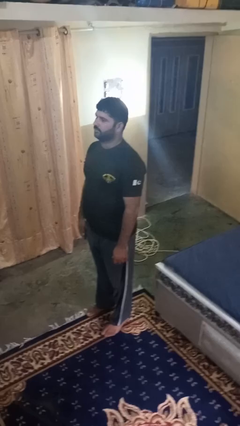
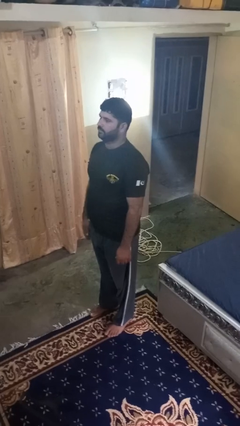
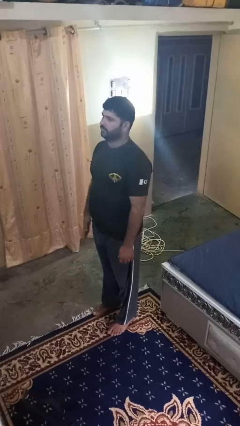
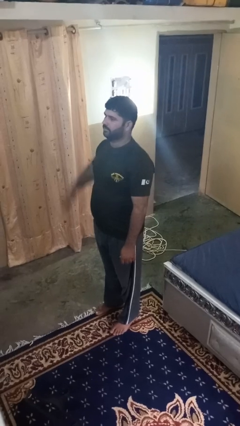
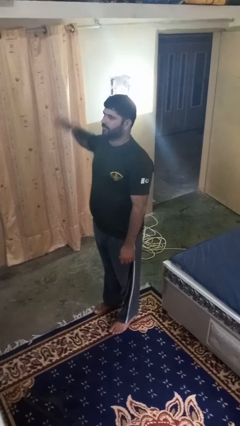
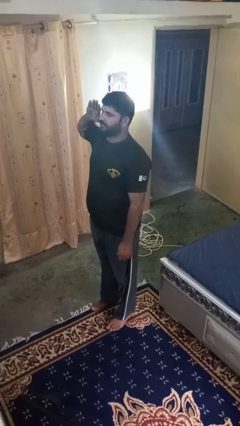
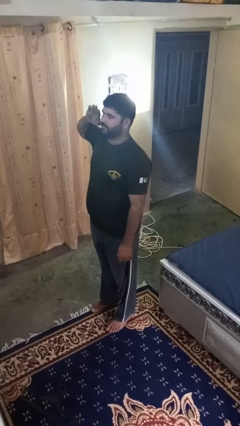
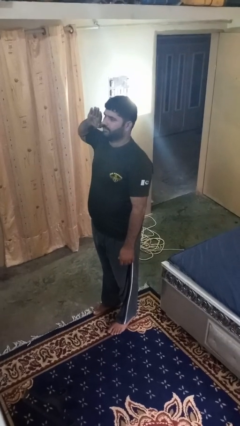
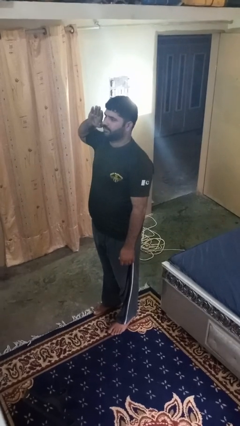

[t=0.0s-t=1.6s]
person salutes

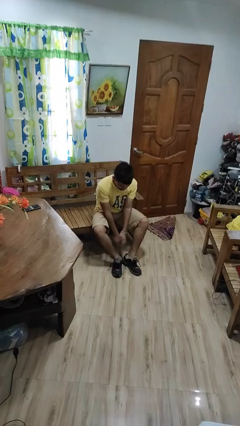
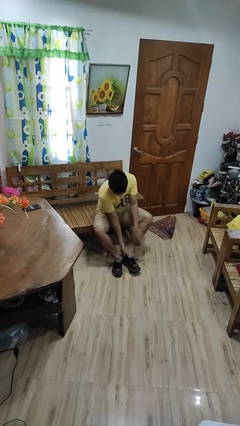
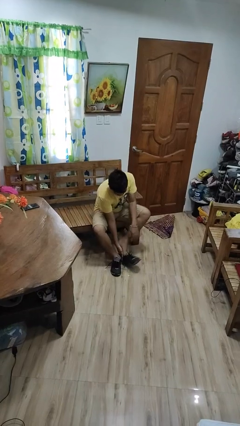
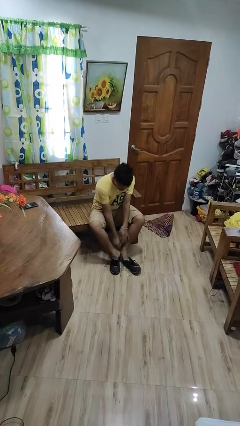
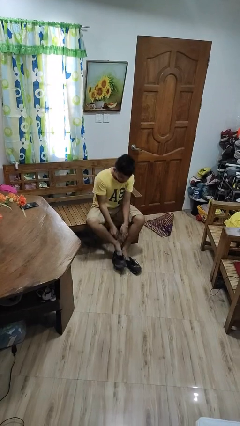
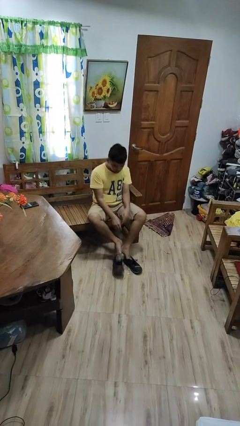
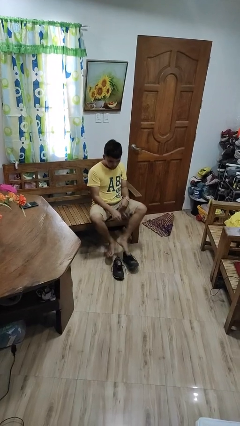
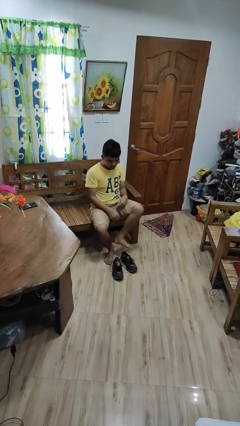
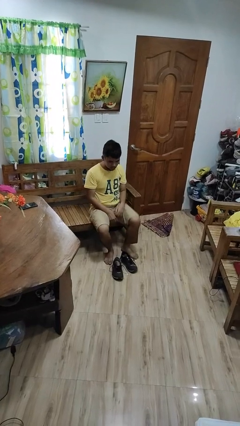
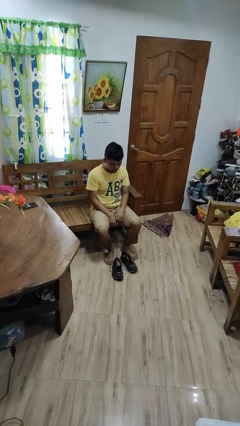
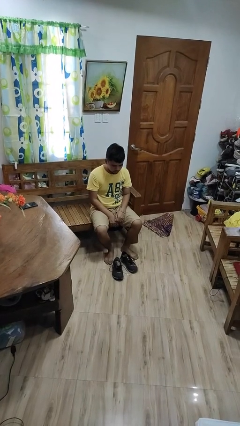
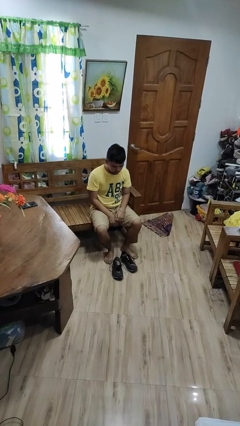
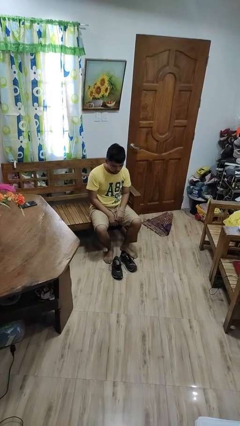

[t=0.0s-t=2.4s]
person takes off shoes

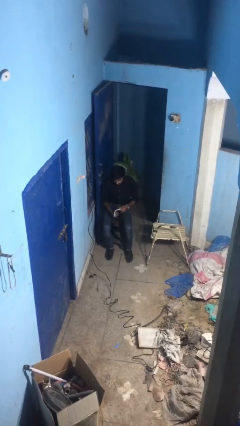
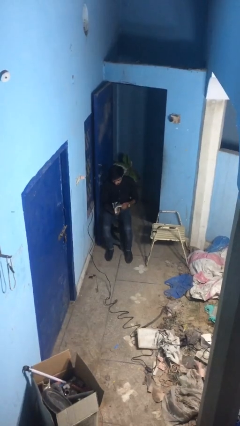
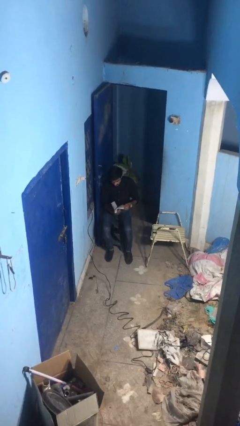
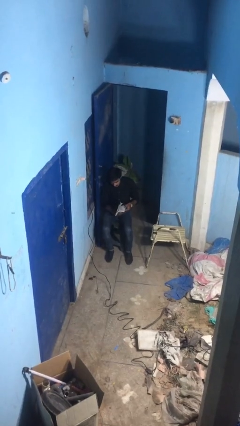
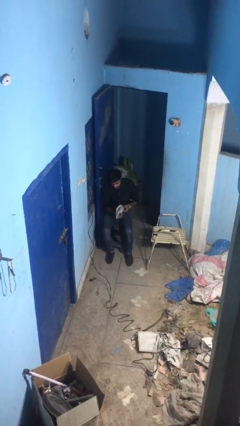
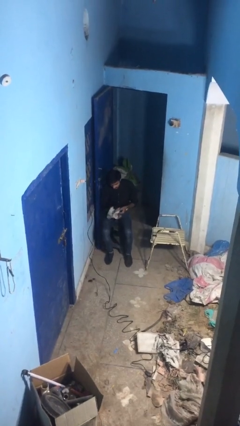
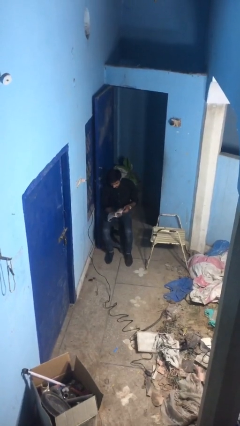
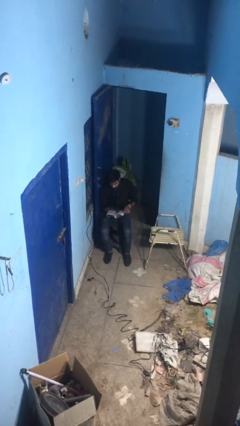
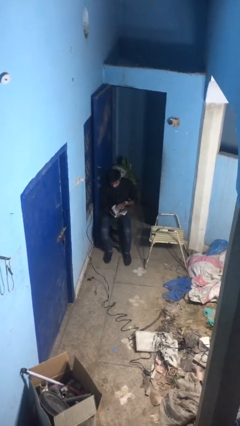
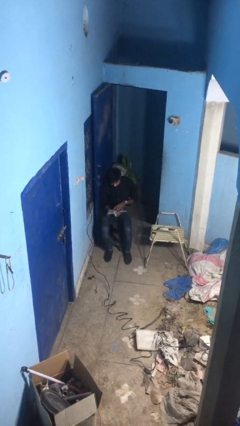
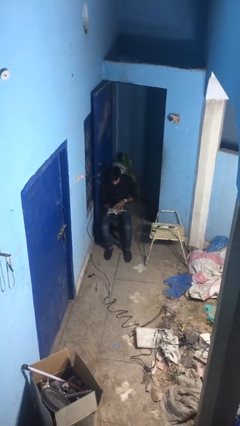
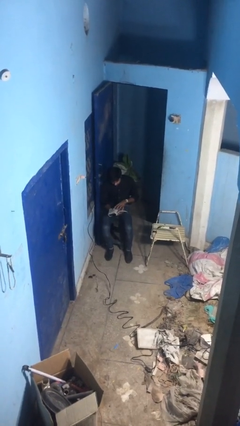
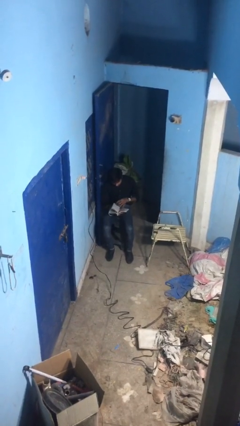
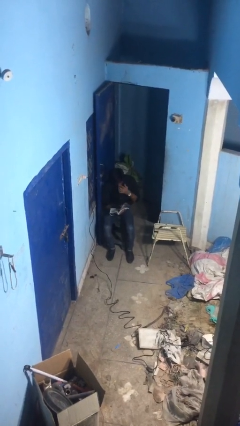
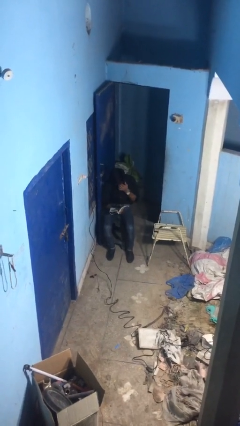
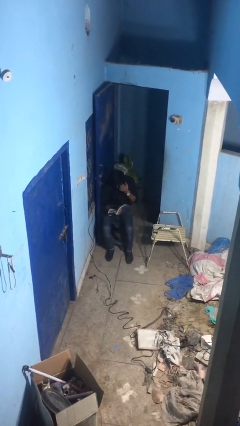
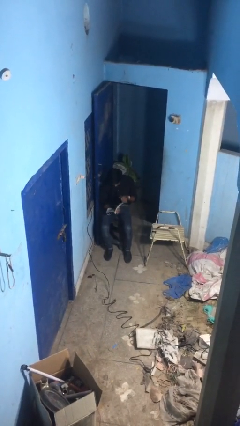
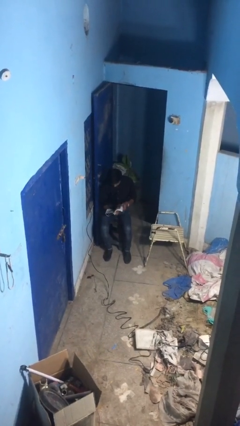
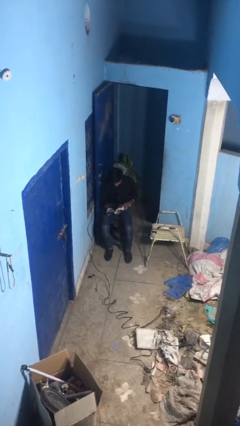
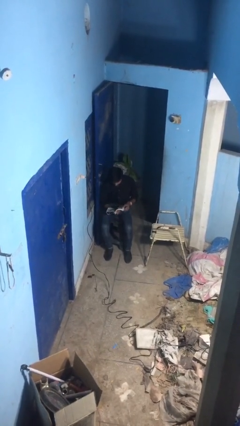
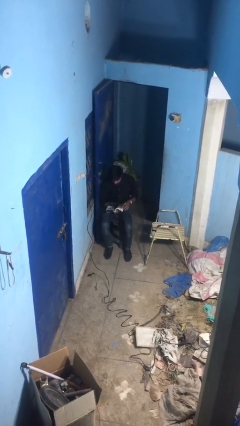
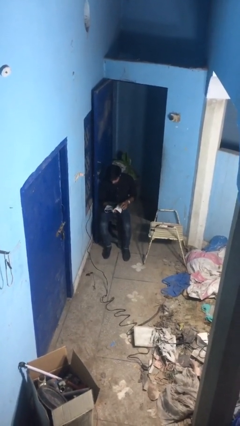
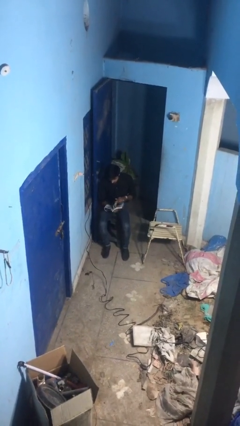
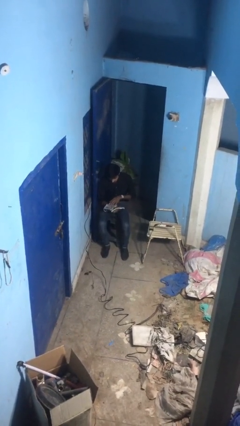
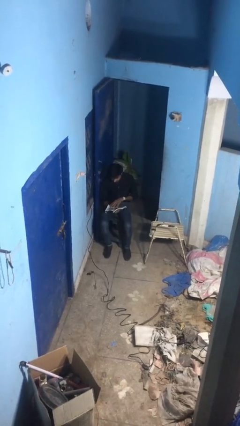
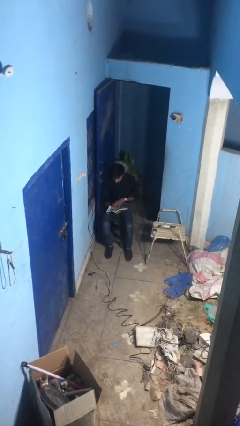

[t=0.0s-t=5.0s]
person reads document

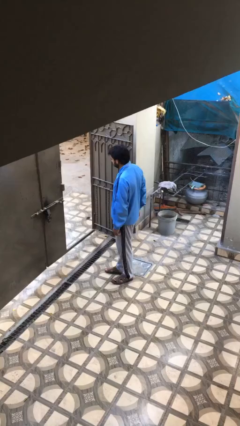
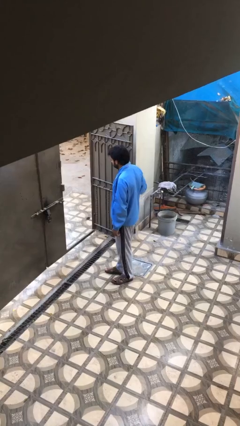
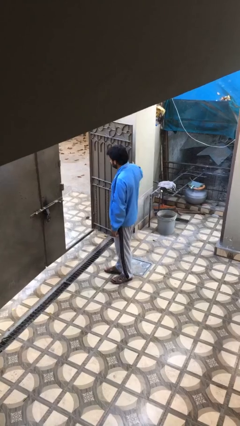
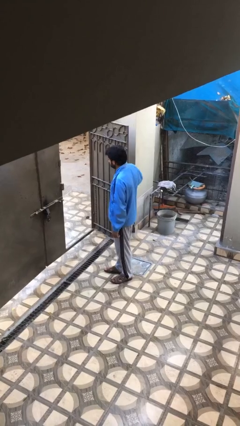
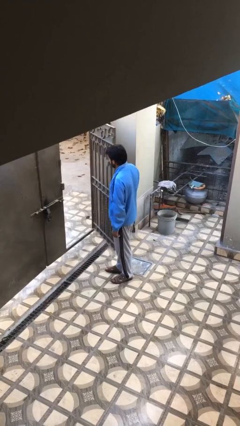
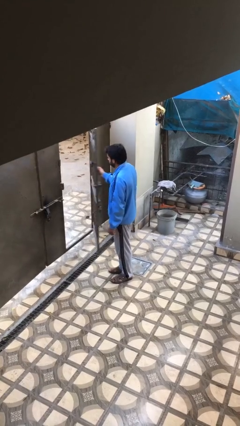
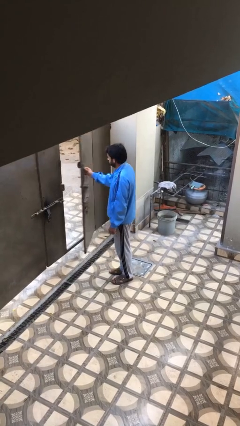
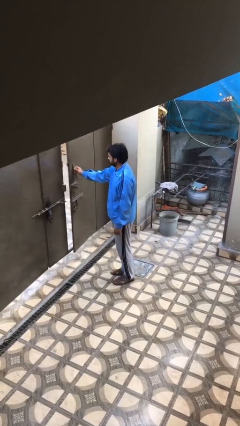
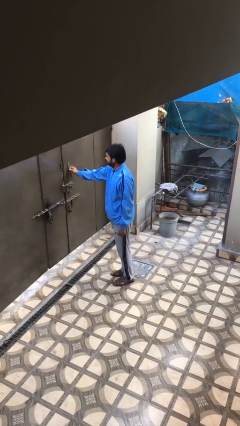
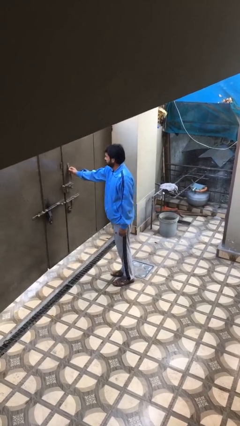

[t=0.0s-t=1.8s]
person closes facility door

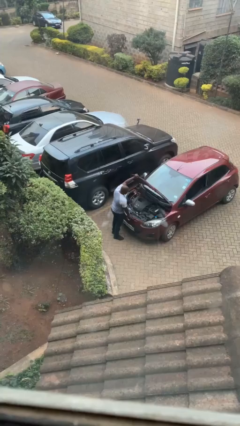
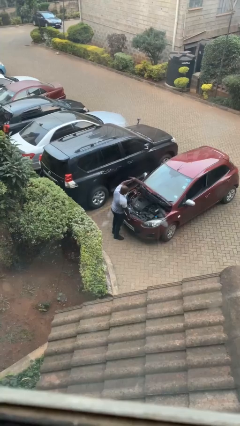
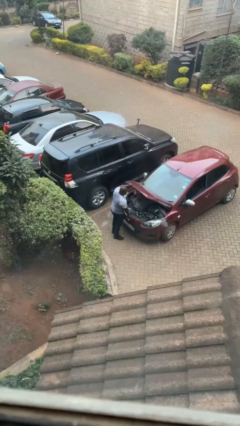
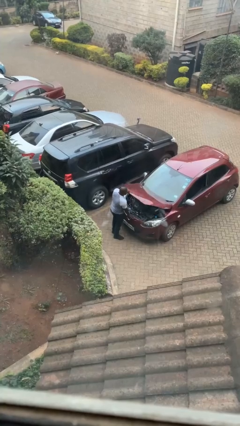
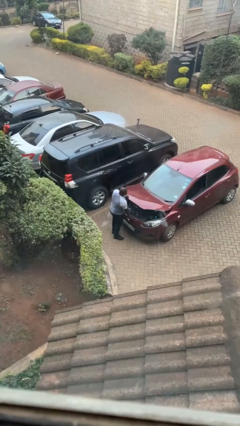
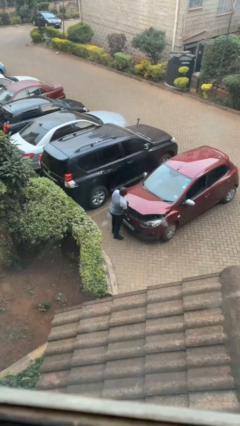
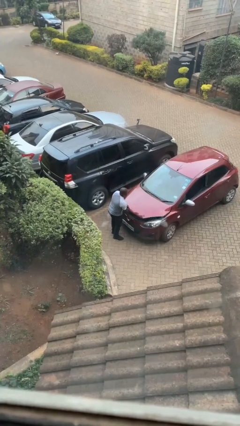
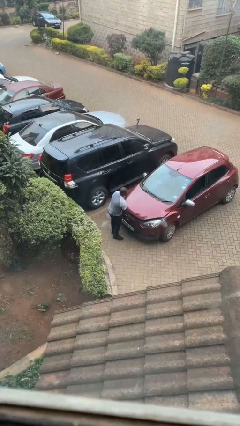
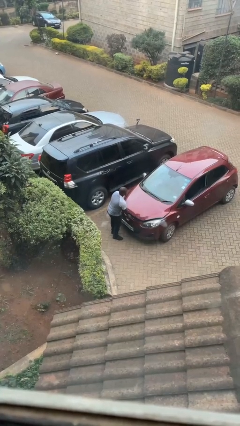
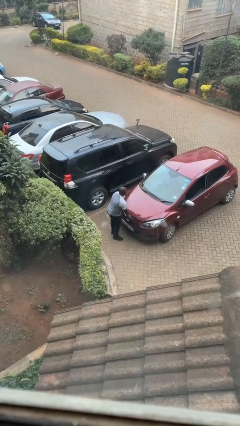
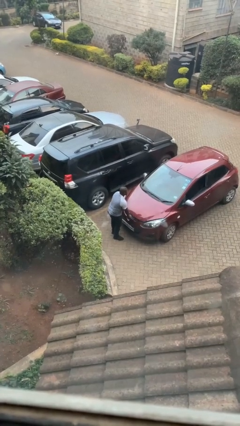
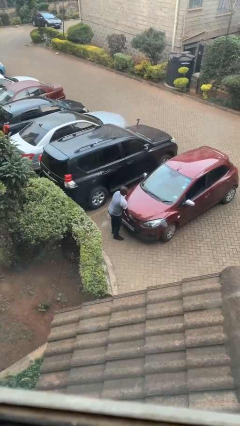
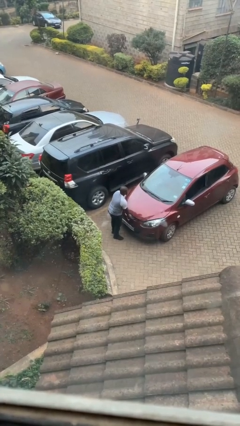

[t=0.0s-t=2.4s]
person closes car hood

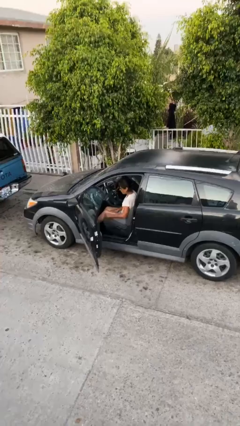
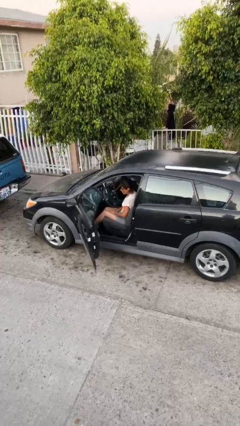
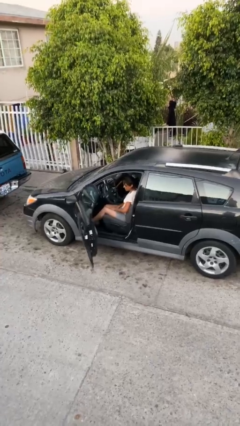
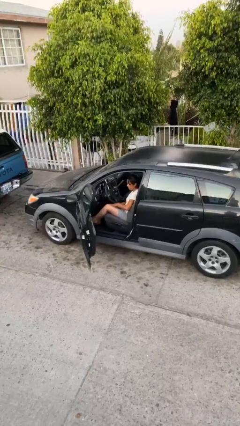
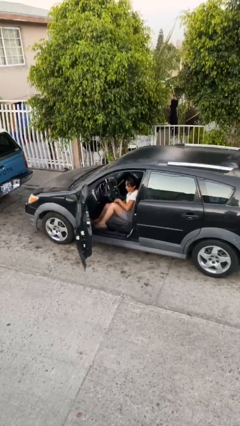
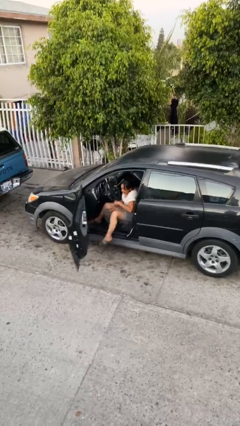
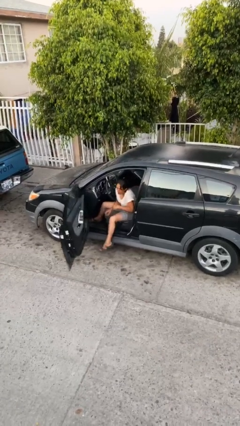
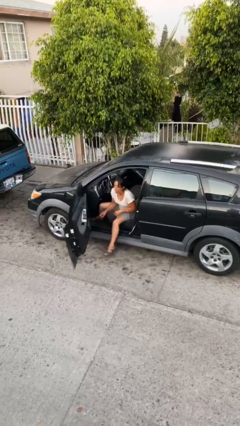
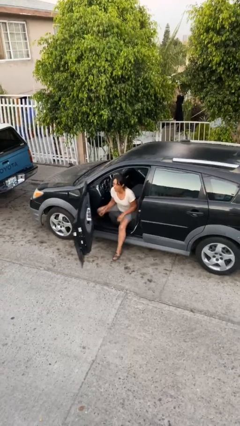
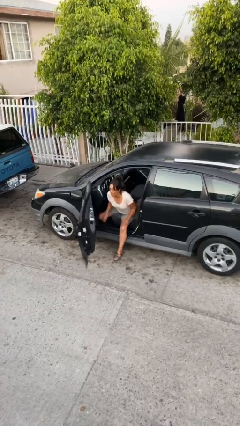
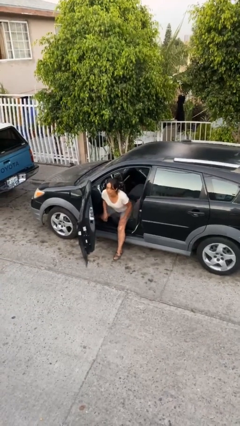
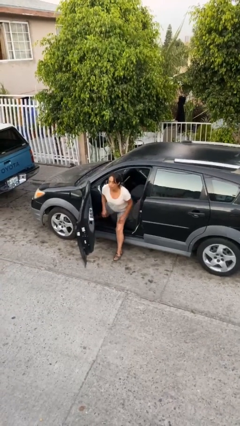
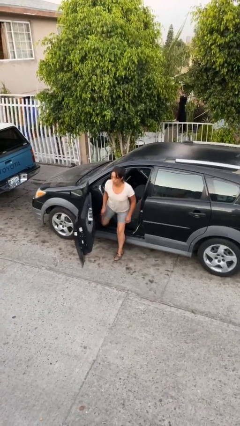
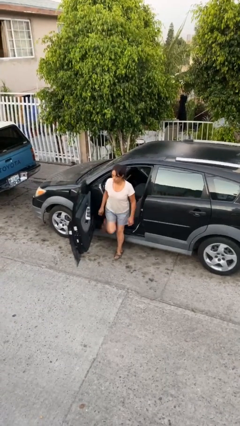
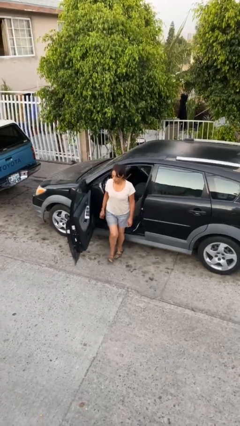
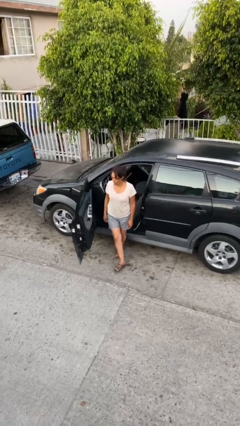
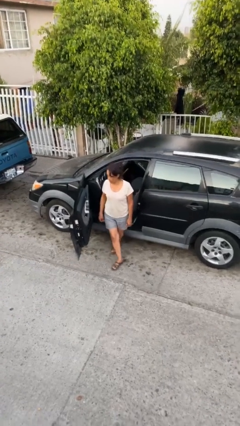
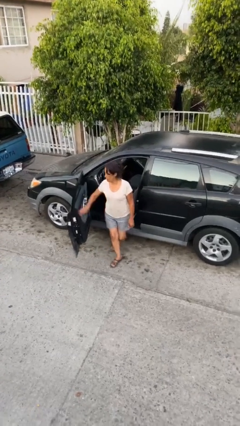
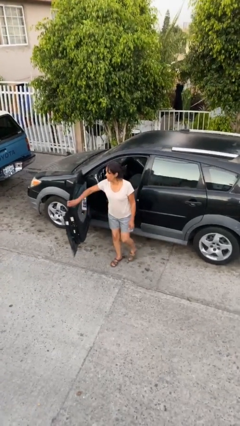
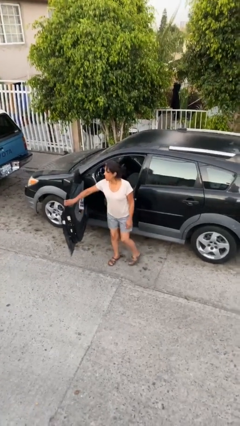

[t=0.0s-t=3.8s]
person exits car

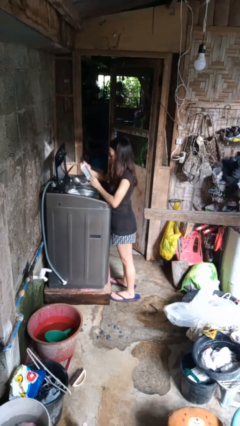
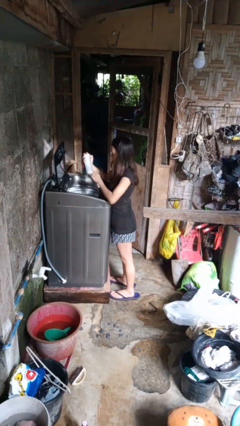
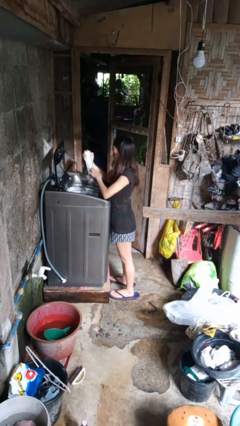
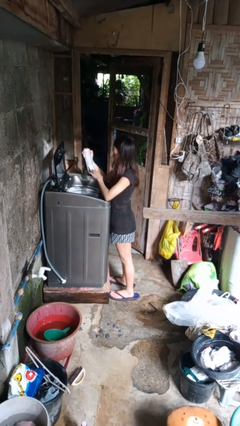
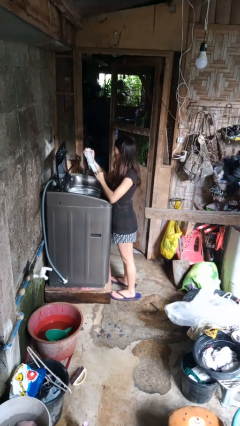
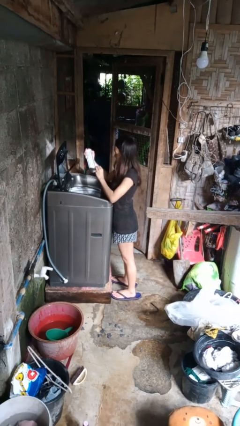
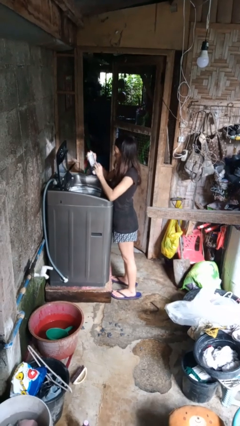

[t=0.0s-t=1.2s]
person cleans dryer lint trap
